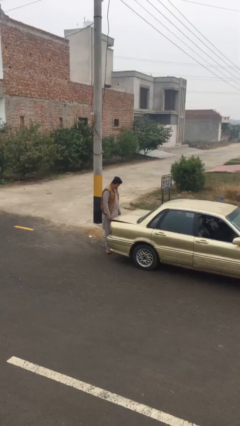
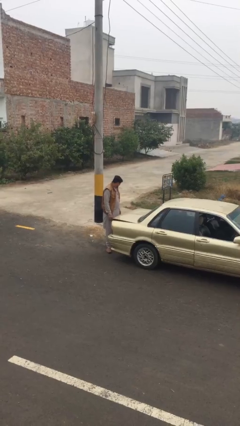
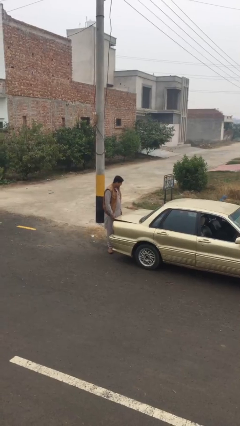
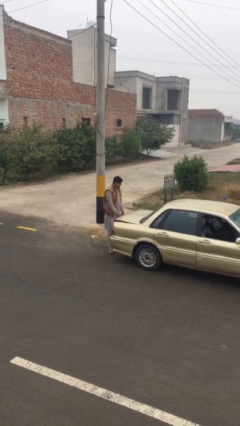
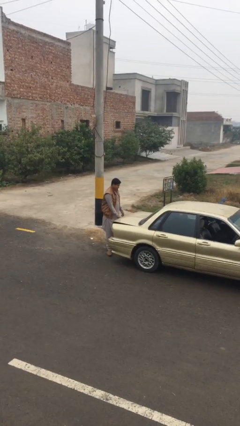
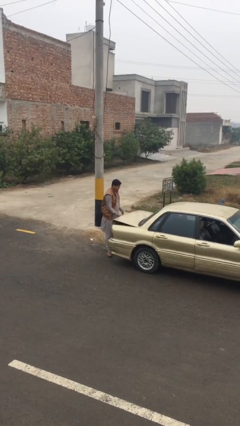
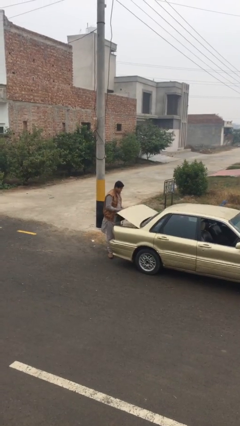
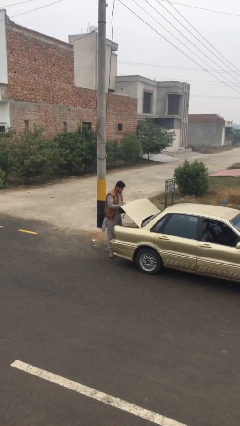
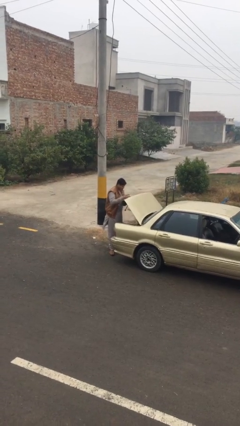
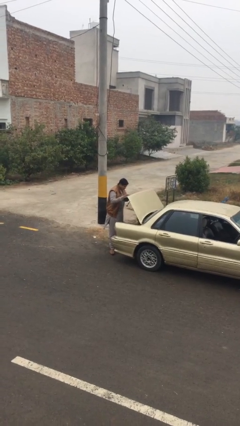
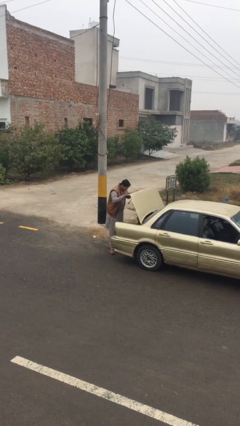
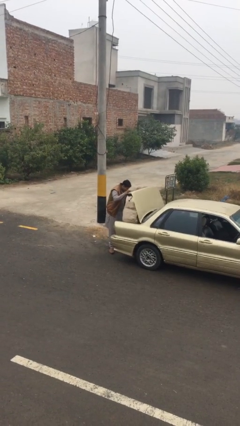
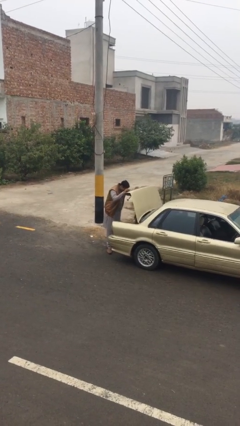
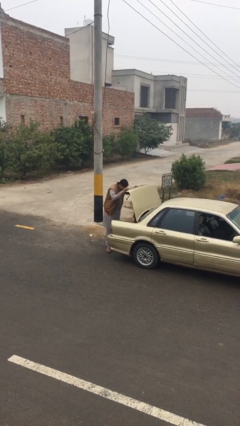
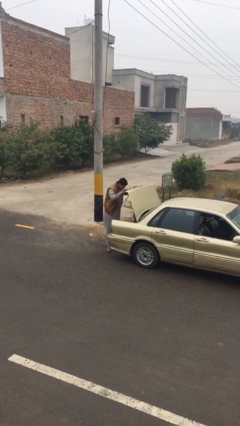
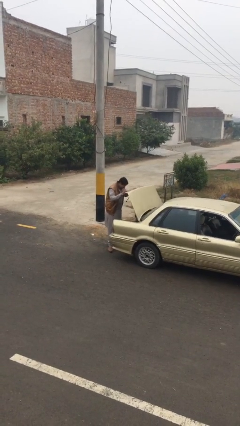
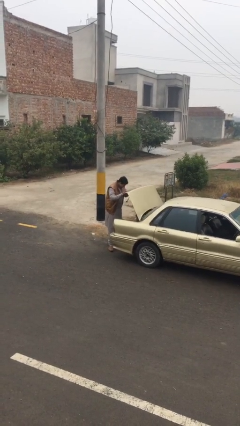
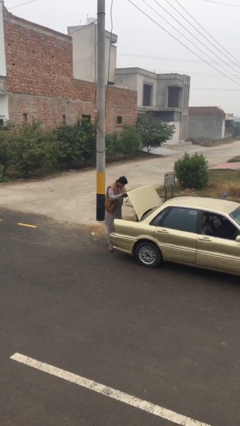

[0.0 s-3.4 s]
person opens car trunk

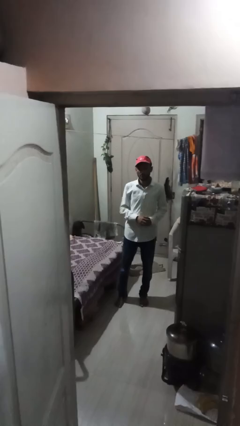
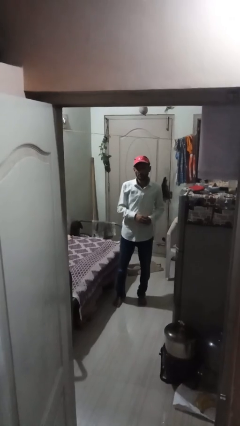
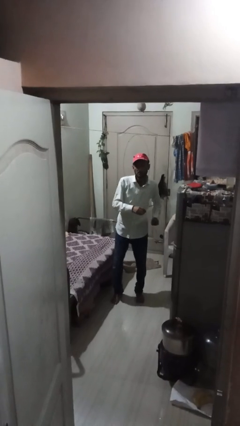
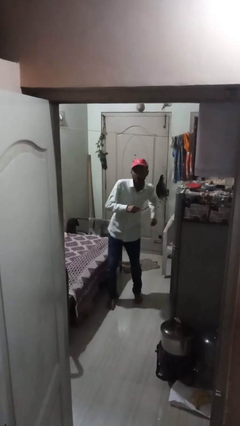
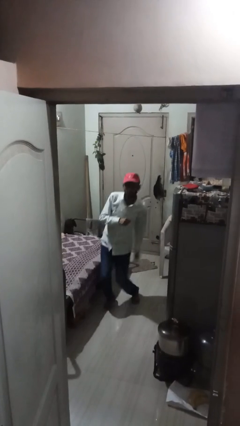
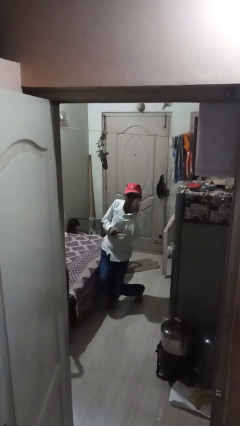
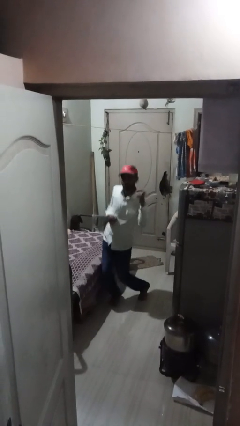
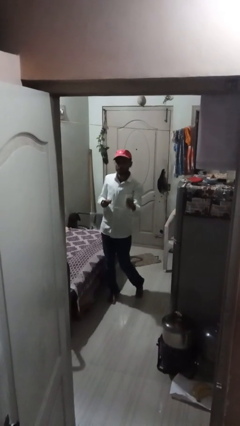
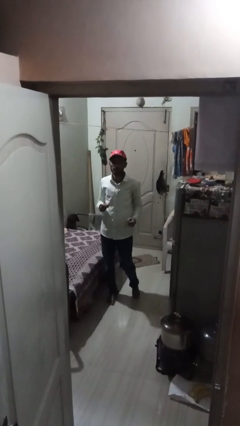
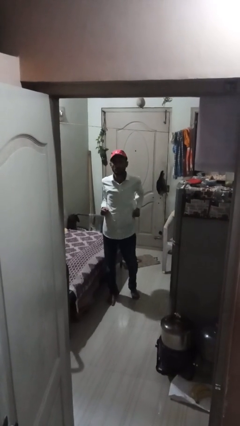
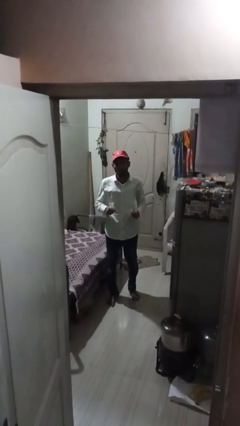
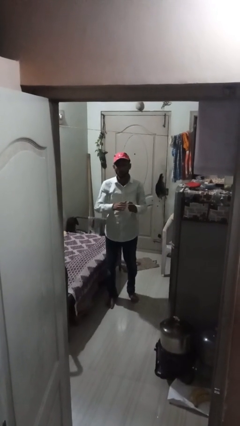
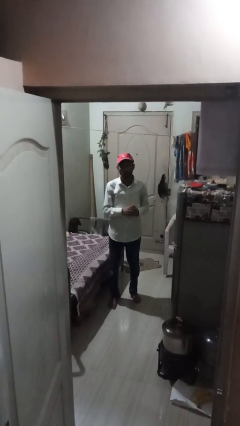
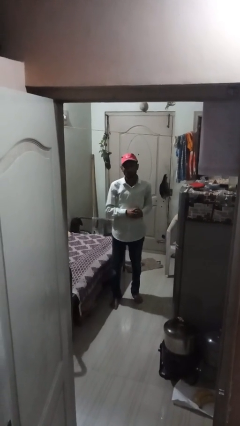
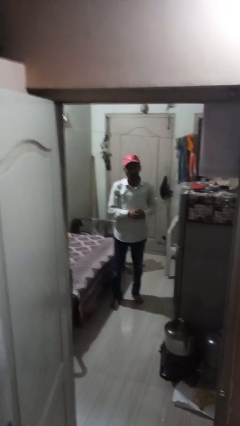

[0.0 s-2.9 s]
person punches

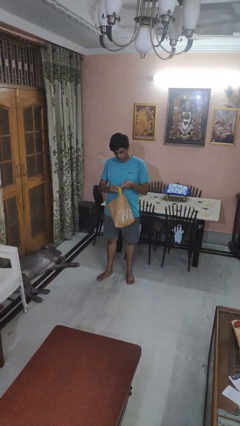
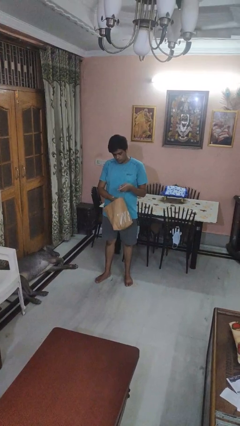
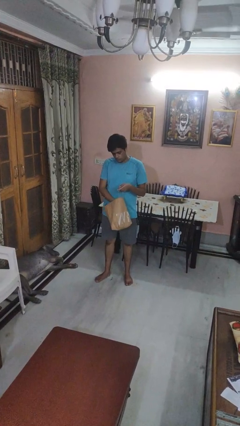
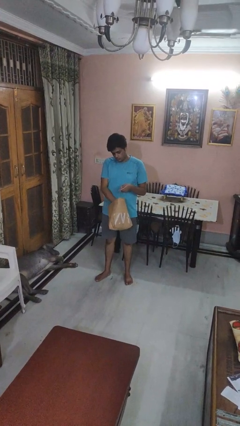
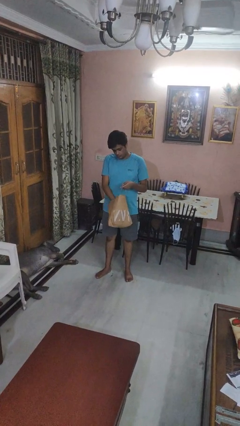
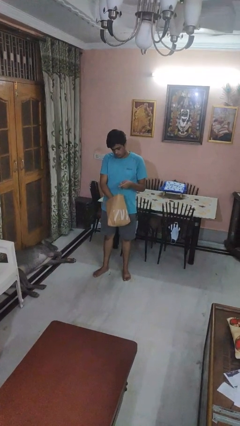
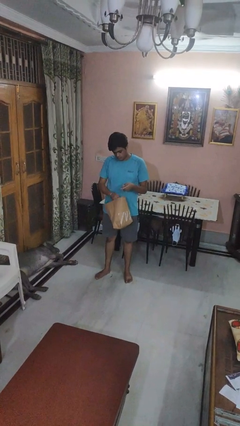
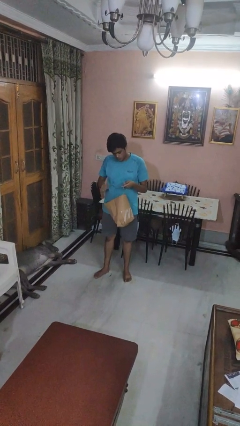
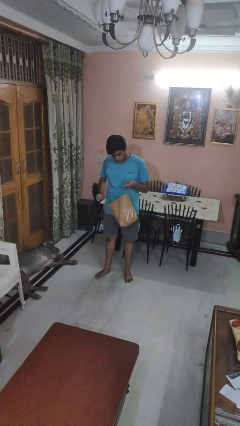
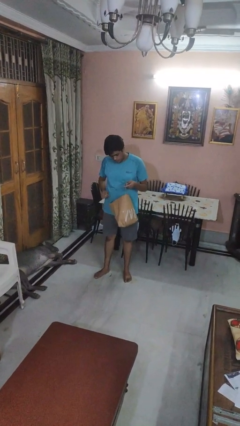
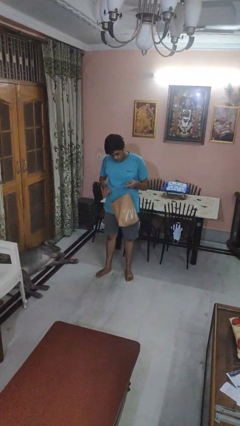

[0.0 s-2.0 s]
person puts object into bag

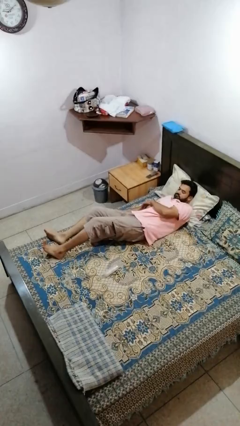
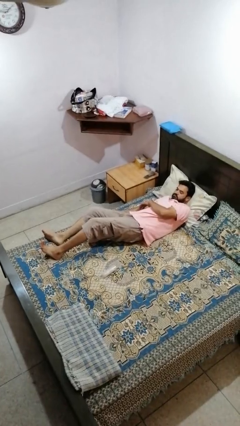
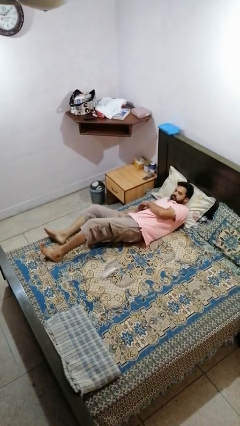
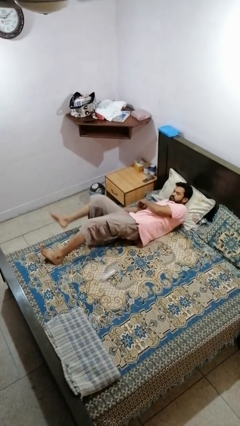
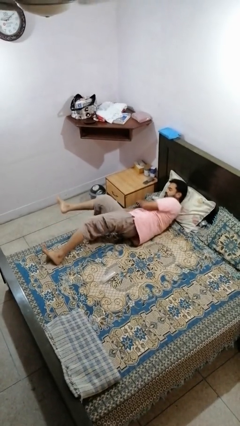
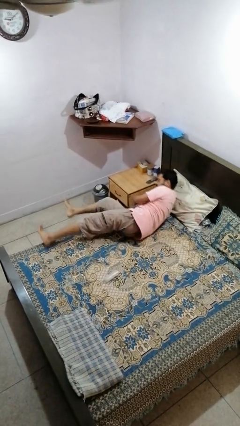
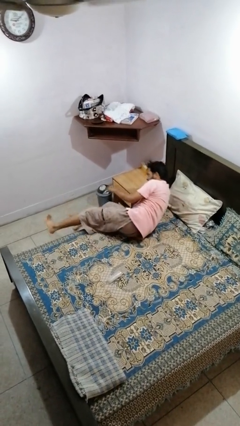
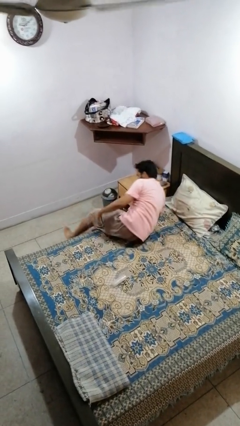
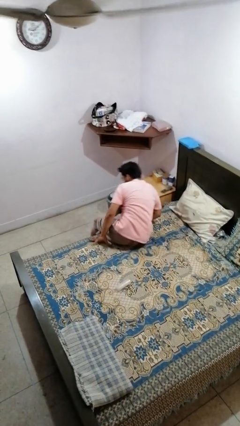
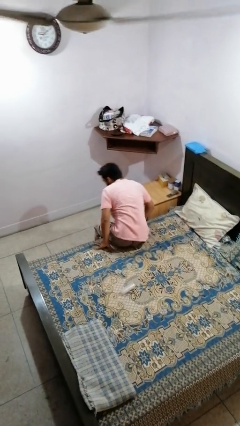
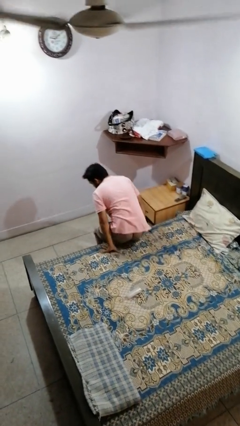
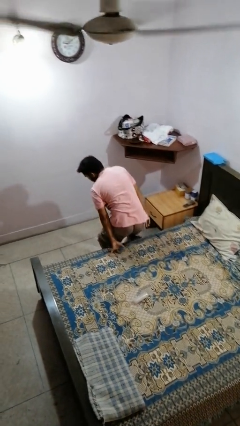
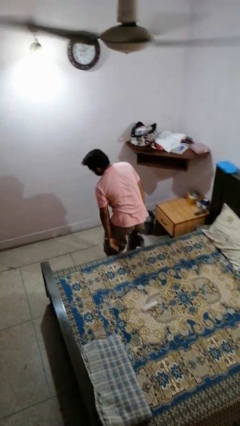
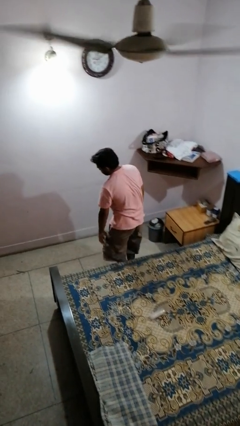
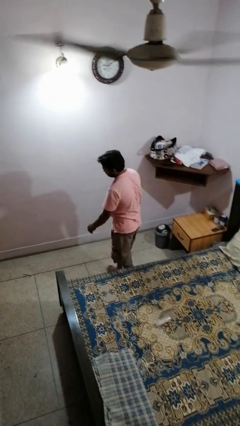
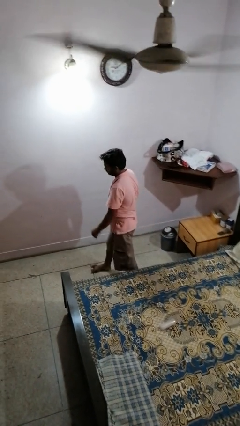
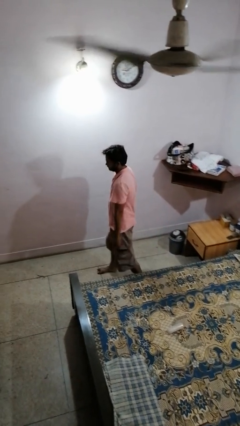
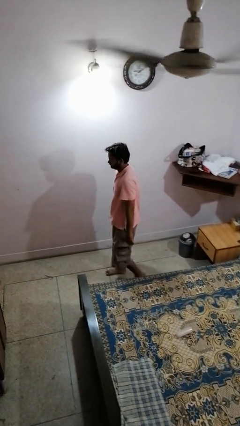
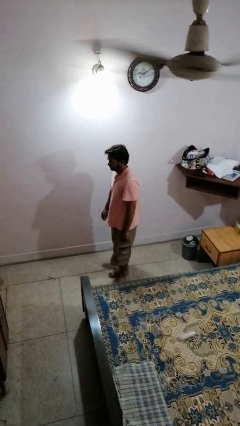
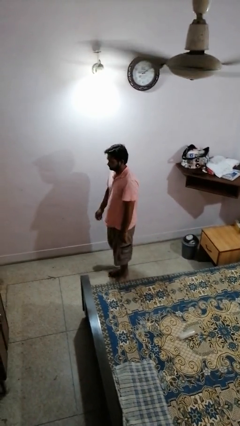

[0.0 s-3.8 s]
person stands up

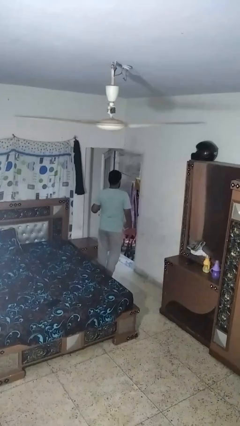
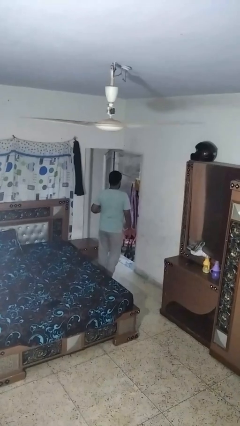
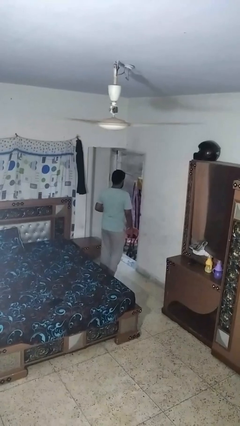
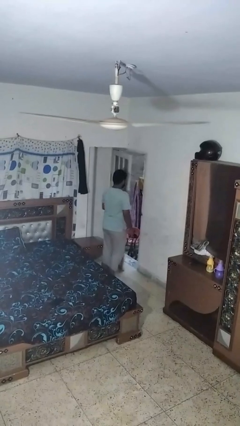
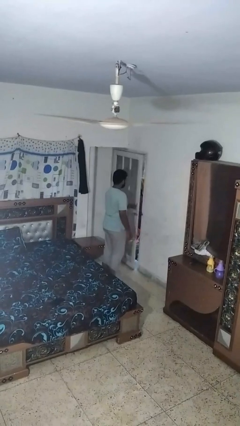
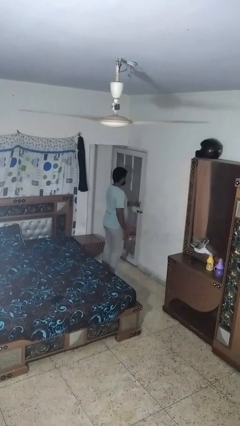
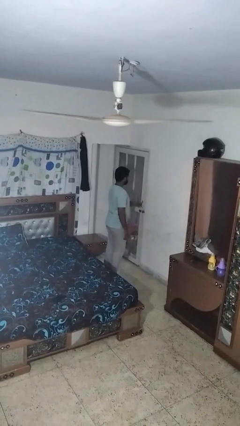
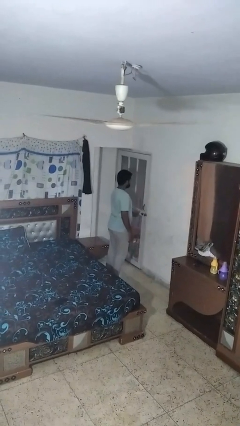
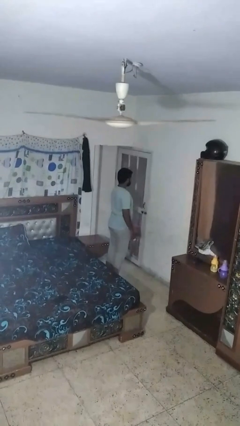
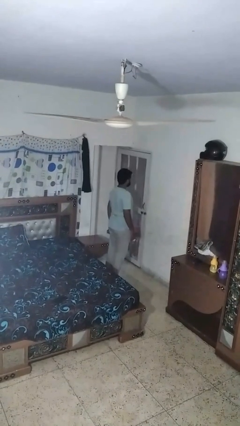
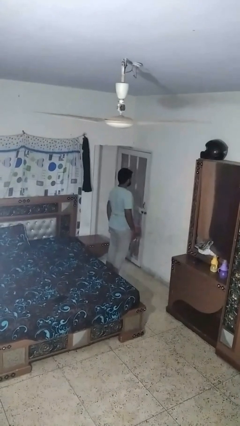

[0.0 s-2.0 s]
person closes gate

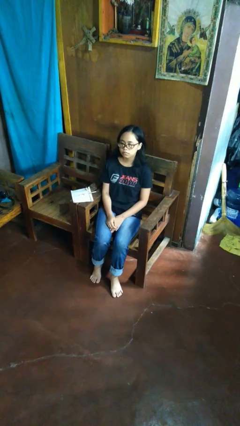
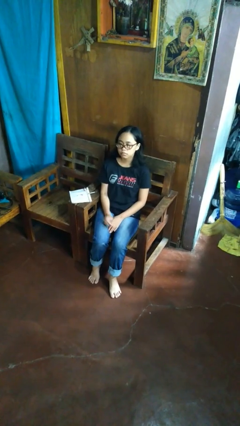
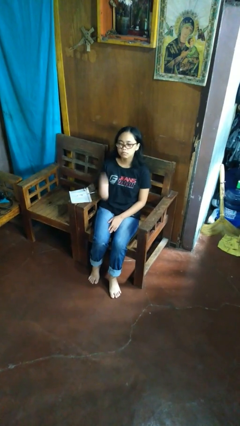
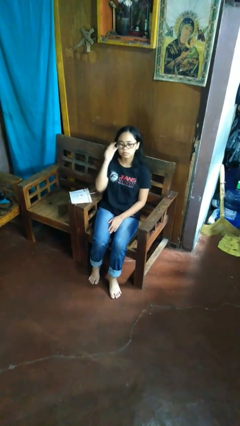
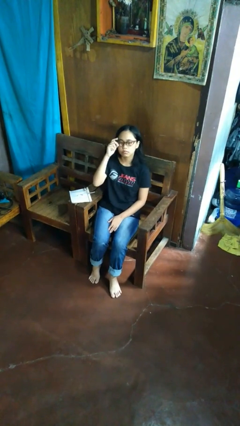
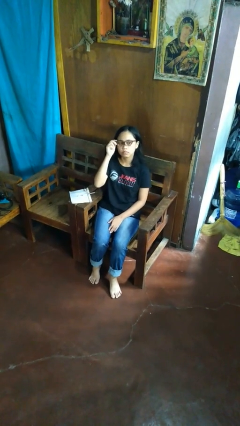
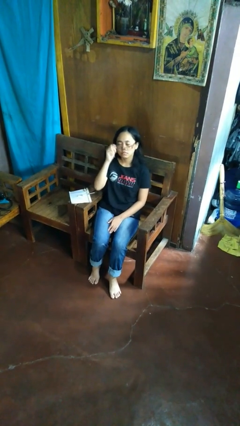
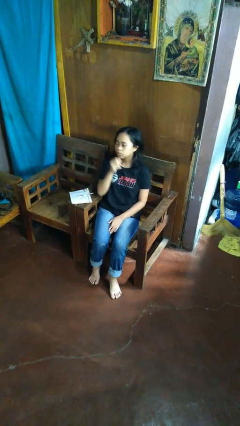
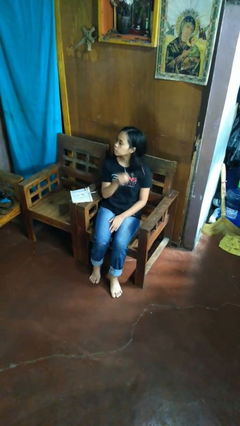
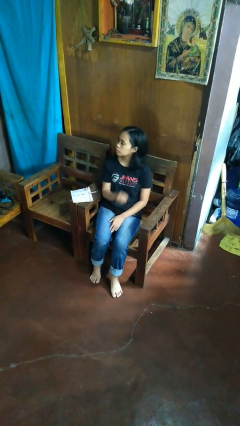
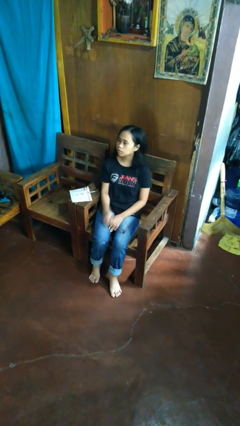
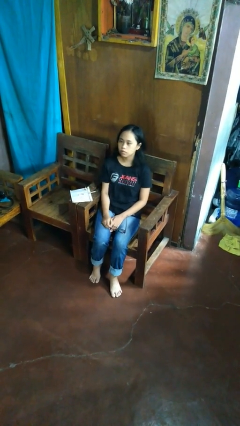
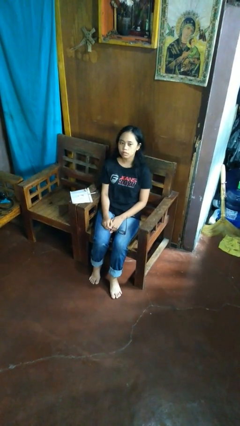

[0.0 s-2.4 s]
person takes off glasses

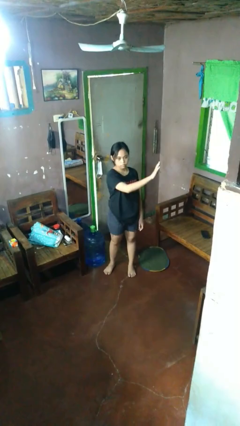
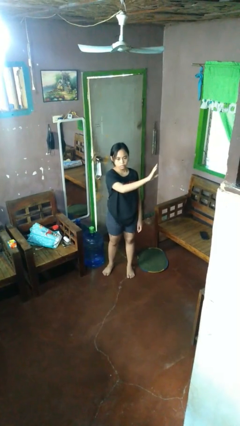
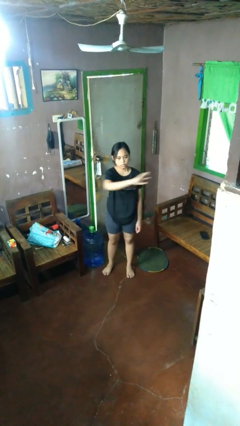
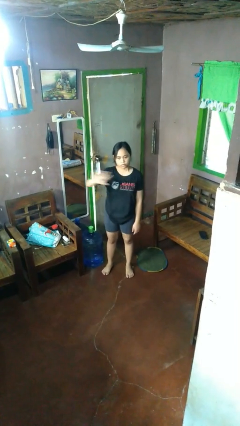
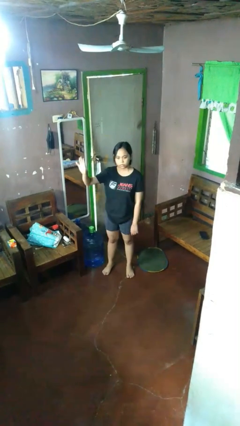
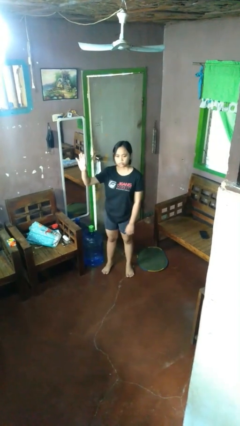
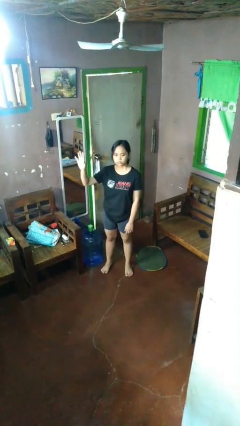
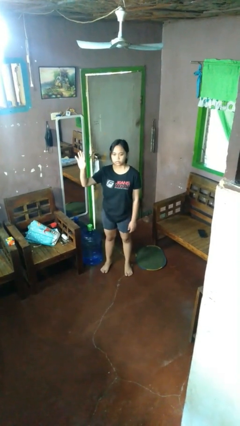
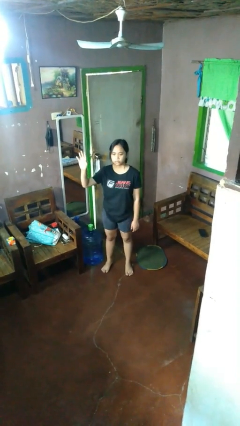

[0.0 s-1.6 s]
person gestures swipe right
